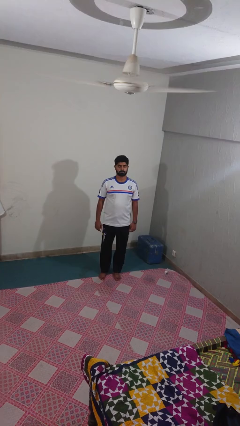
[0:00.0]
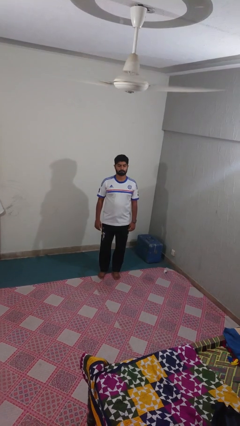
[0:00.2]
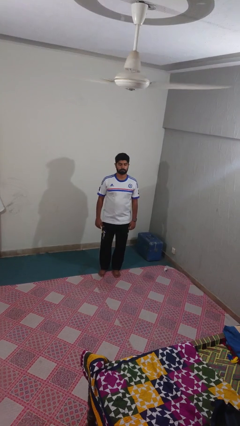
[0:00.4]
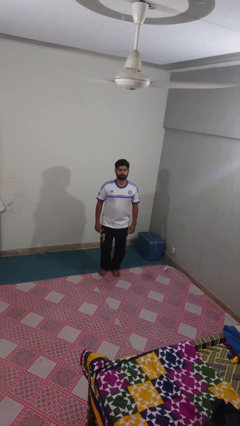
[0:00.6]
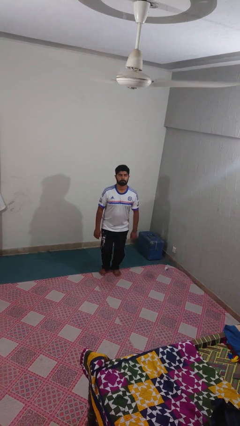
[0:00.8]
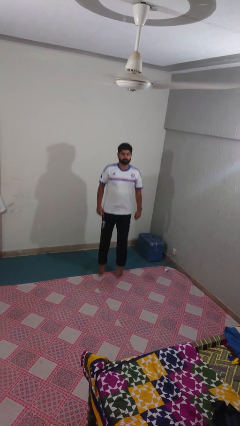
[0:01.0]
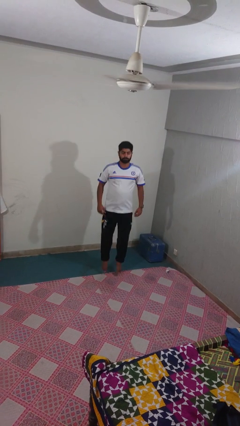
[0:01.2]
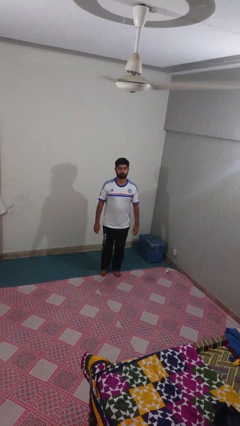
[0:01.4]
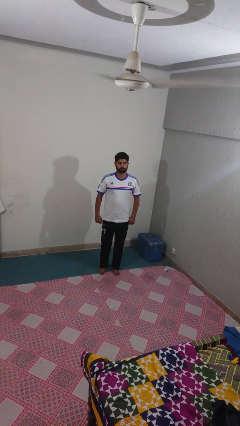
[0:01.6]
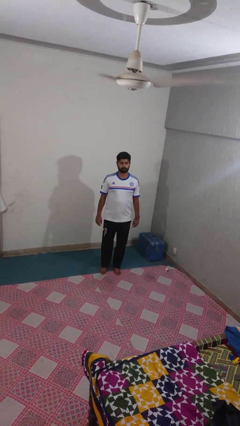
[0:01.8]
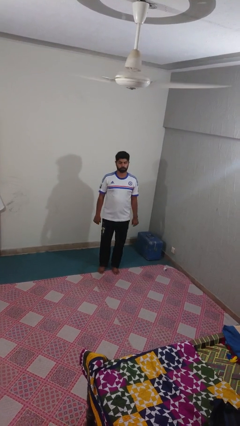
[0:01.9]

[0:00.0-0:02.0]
person jumps

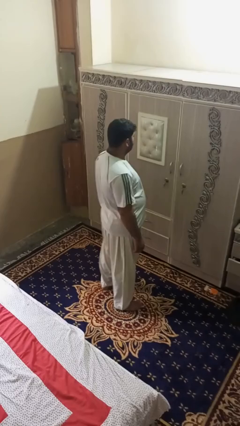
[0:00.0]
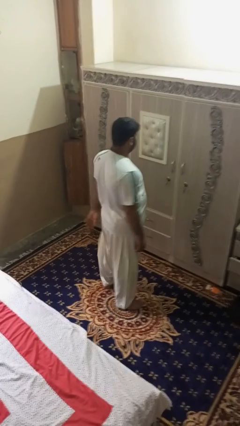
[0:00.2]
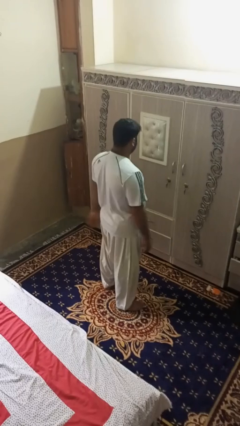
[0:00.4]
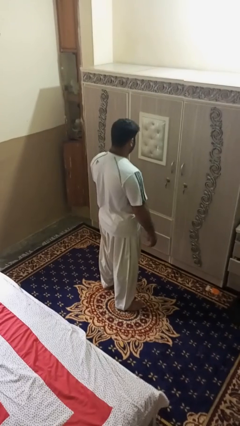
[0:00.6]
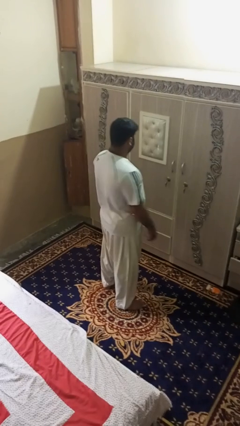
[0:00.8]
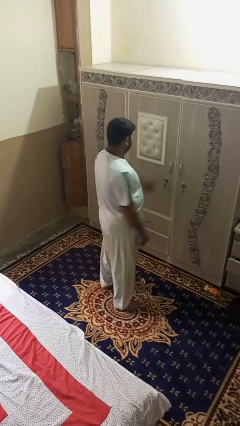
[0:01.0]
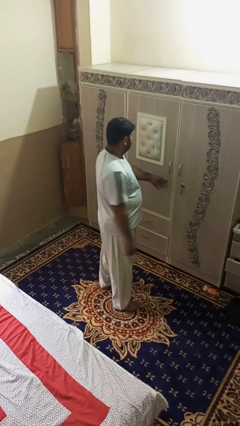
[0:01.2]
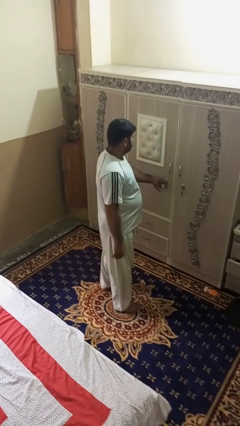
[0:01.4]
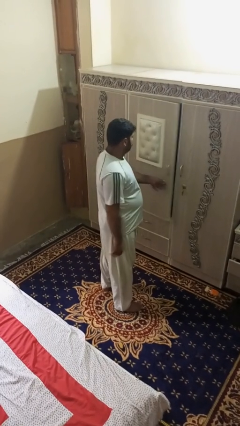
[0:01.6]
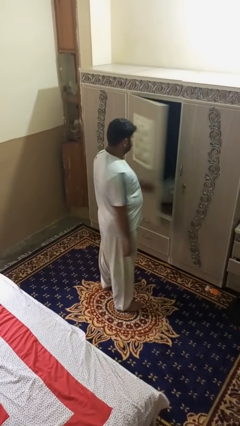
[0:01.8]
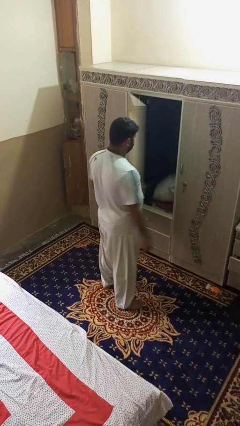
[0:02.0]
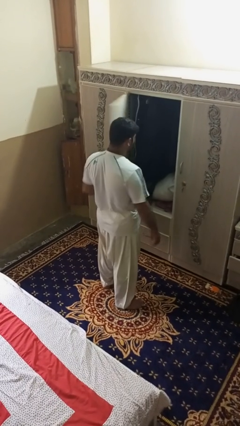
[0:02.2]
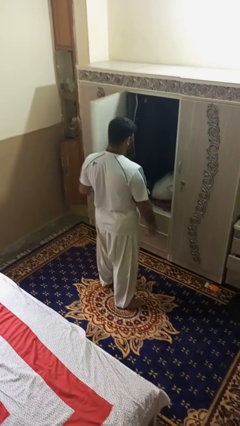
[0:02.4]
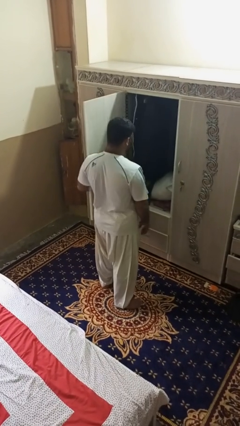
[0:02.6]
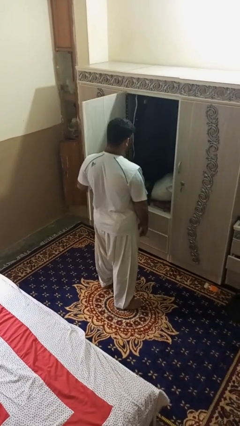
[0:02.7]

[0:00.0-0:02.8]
person opens dresser drawer

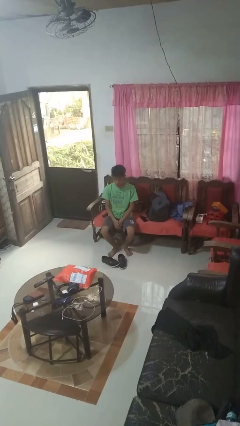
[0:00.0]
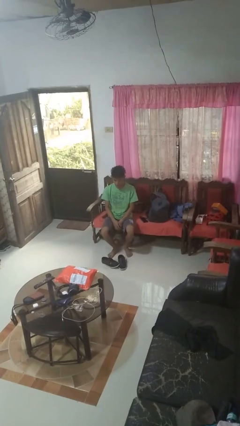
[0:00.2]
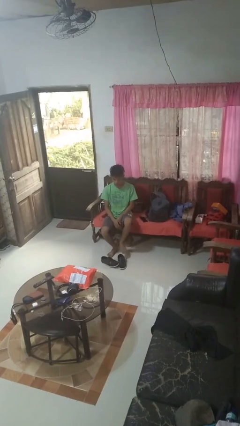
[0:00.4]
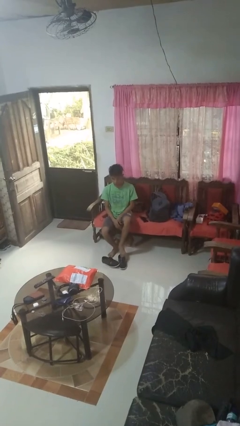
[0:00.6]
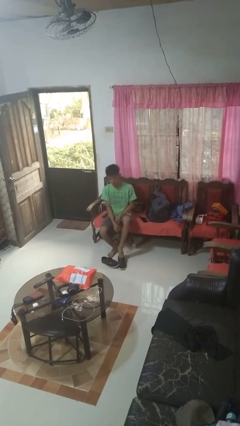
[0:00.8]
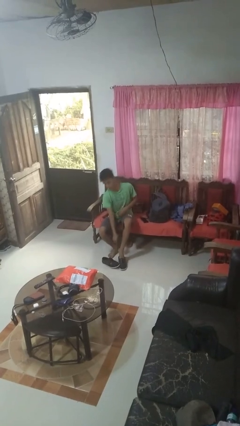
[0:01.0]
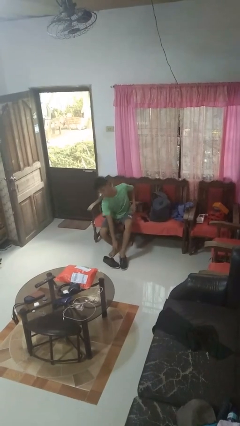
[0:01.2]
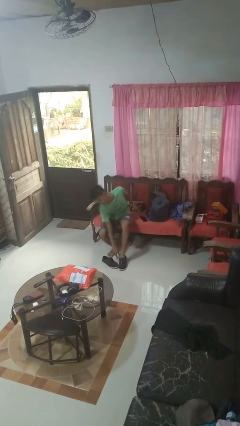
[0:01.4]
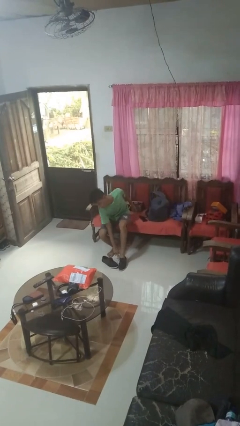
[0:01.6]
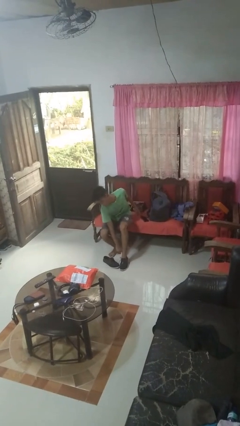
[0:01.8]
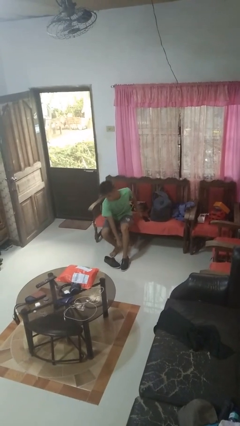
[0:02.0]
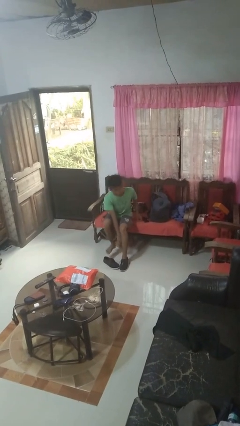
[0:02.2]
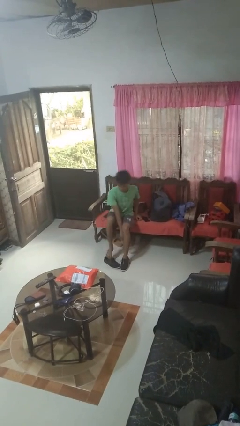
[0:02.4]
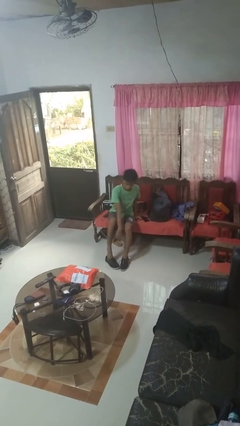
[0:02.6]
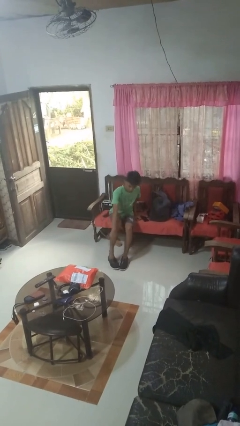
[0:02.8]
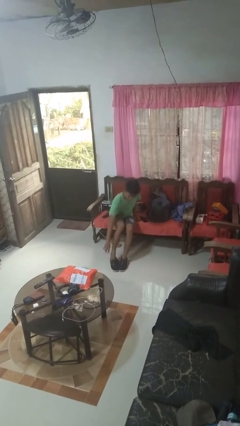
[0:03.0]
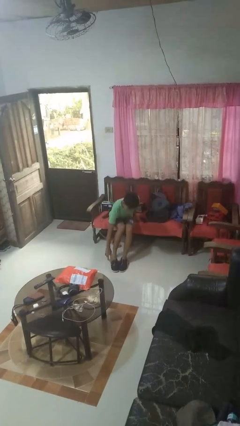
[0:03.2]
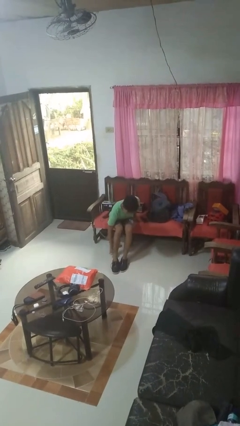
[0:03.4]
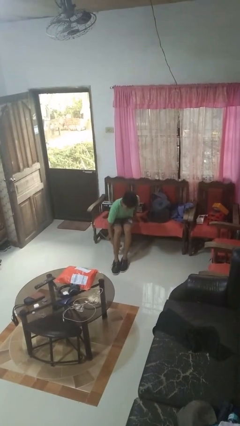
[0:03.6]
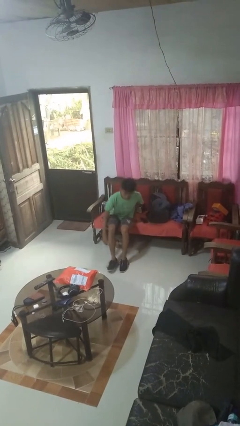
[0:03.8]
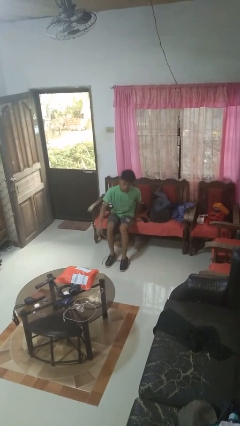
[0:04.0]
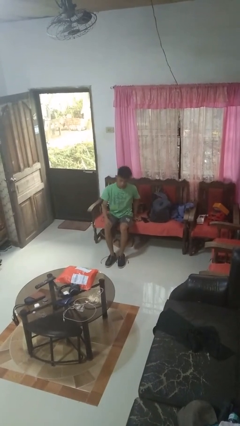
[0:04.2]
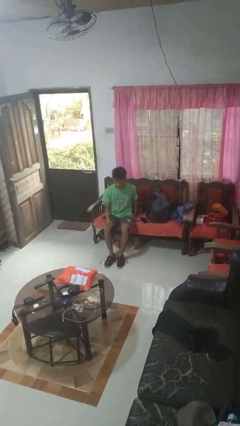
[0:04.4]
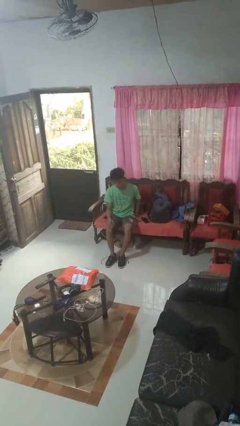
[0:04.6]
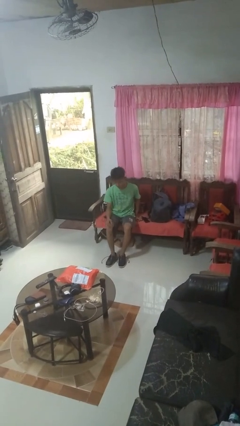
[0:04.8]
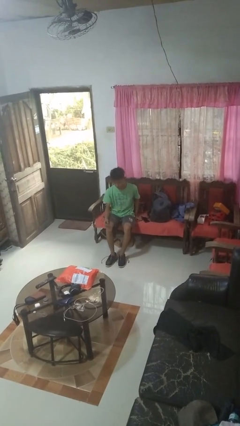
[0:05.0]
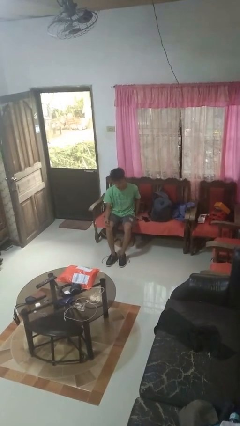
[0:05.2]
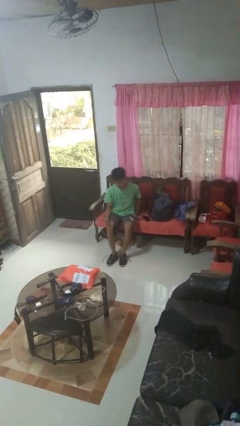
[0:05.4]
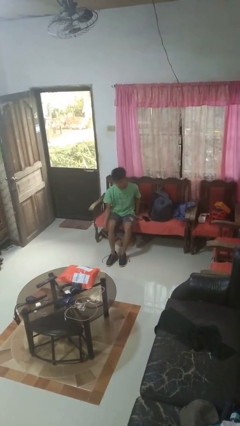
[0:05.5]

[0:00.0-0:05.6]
person puts on shoes

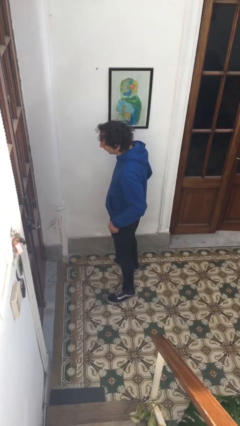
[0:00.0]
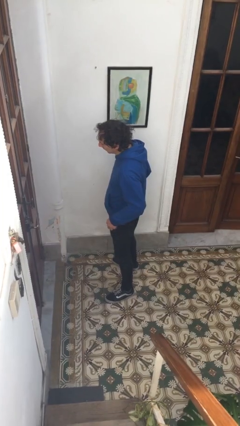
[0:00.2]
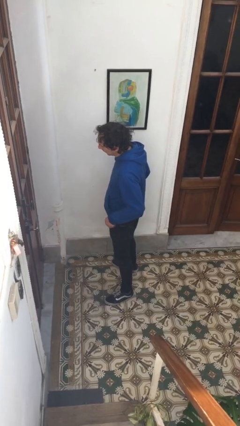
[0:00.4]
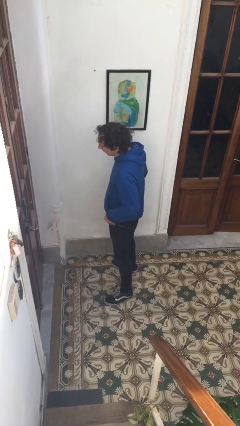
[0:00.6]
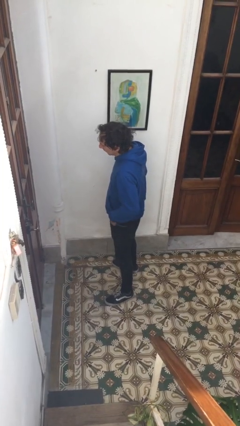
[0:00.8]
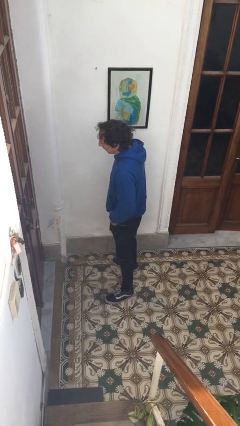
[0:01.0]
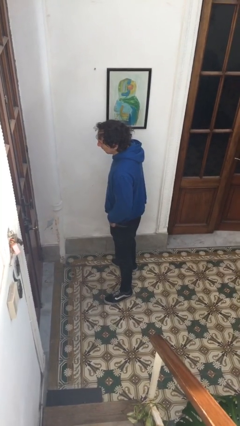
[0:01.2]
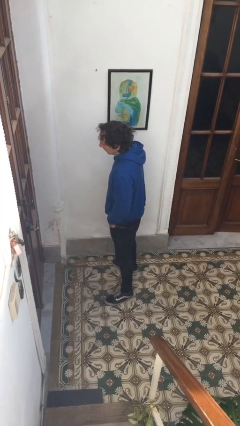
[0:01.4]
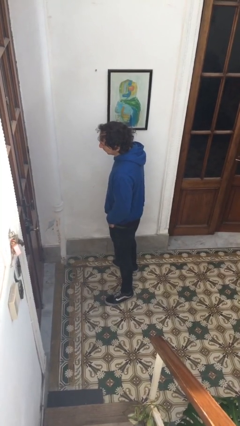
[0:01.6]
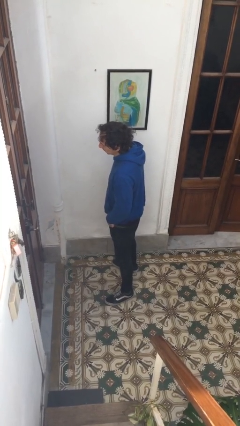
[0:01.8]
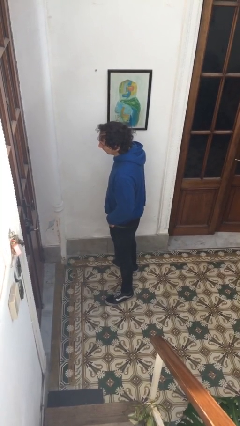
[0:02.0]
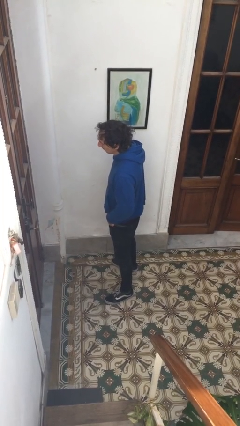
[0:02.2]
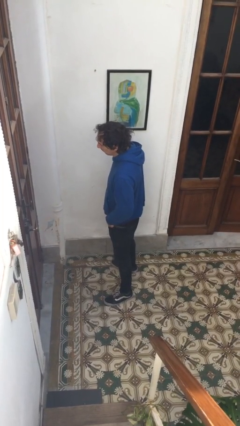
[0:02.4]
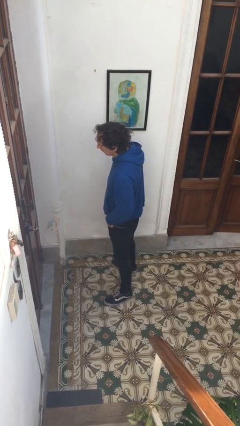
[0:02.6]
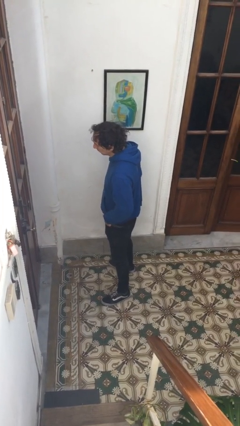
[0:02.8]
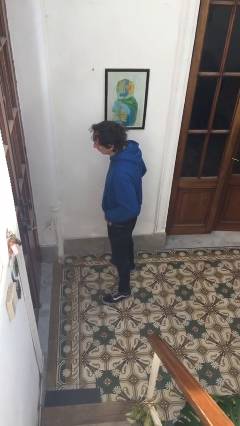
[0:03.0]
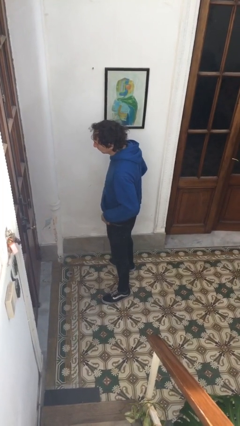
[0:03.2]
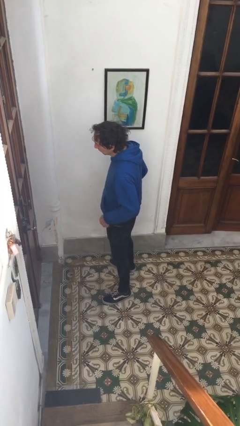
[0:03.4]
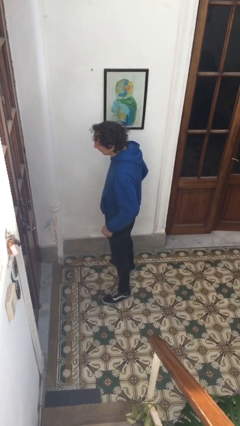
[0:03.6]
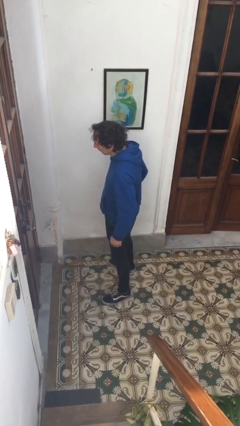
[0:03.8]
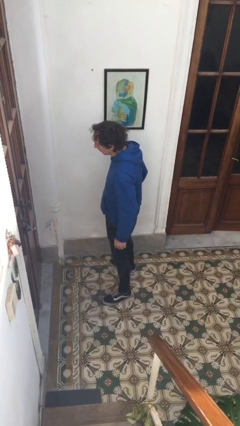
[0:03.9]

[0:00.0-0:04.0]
person puts hands in back pockets

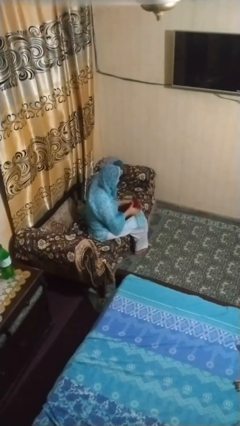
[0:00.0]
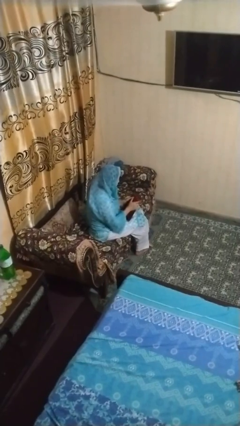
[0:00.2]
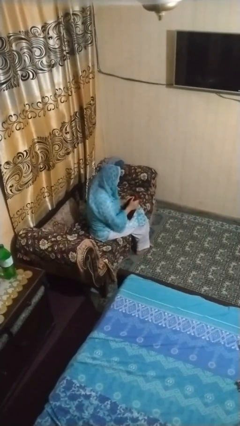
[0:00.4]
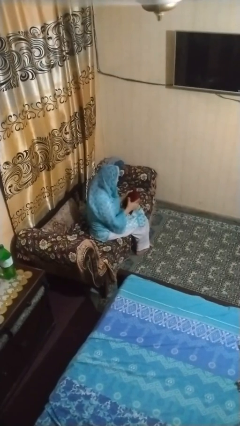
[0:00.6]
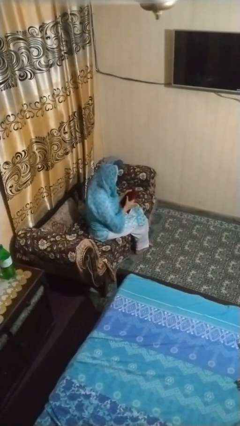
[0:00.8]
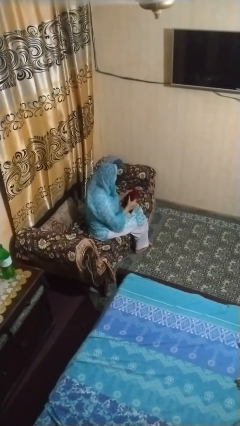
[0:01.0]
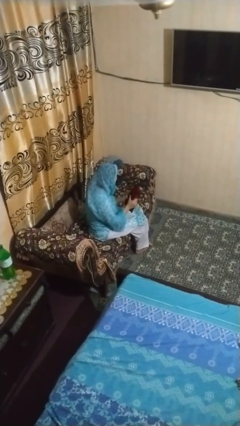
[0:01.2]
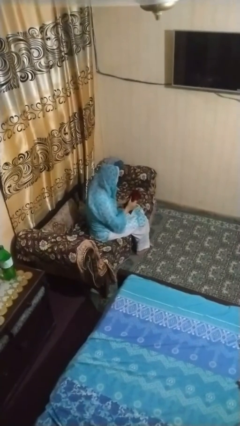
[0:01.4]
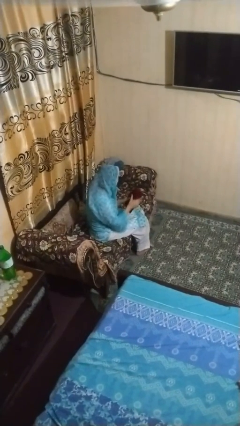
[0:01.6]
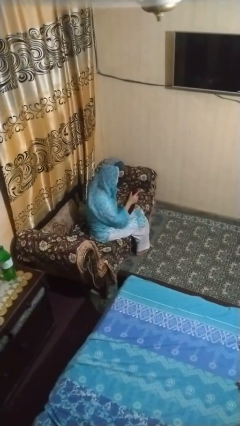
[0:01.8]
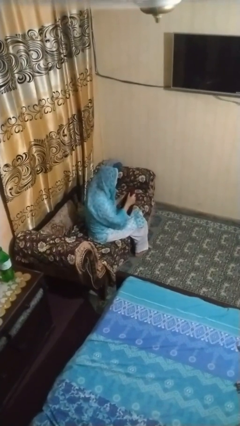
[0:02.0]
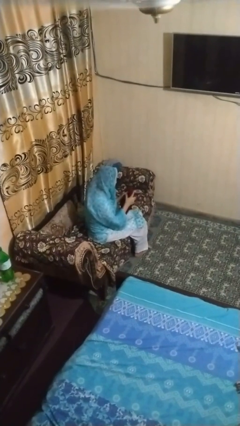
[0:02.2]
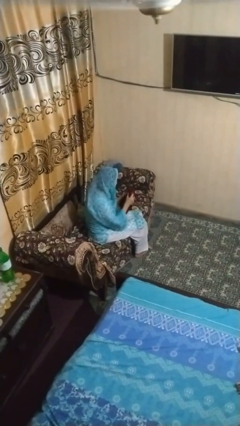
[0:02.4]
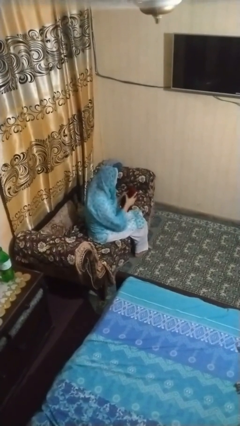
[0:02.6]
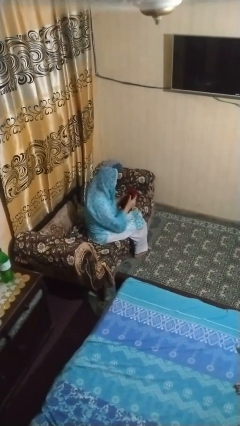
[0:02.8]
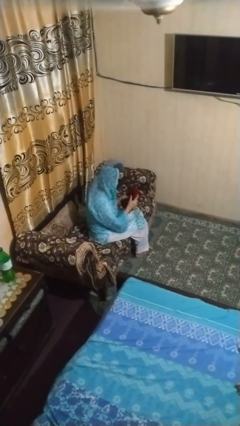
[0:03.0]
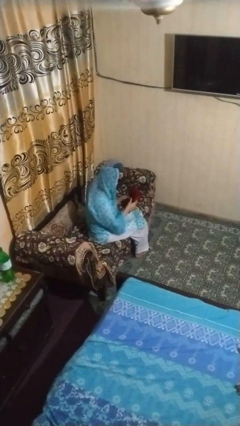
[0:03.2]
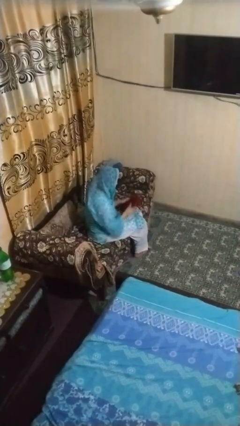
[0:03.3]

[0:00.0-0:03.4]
person squeezes object
